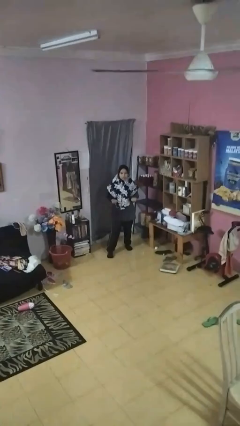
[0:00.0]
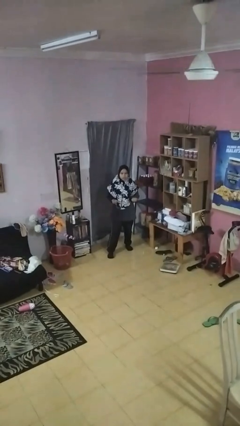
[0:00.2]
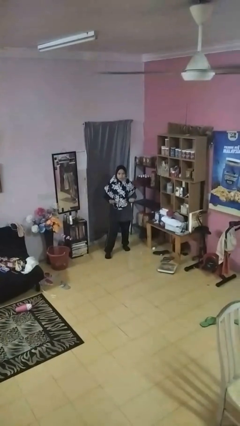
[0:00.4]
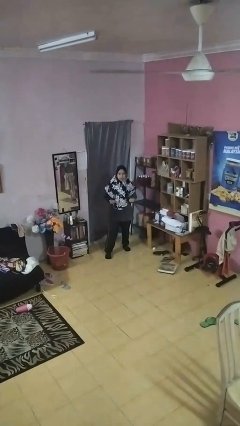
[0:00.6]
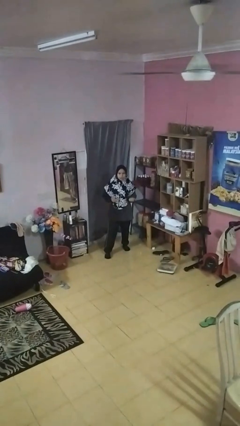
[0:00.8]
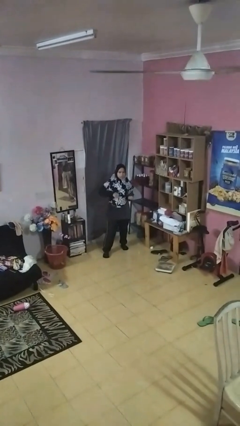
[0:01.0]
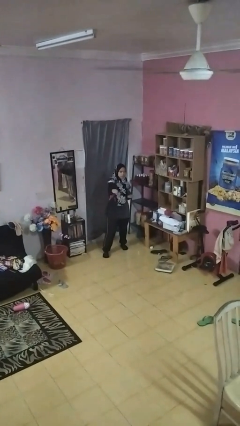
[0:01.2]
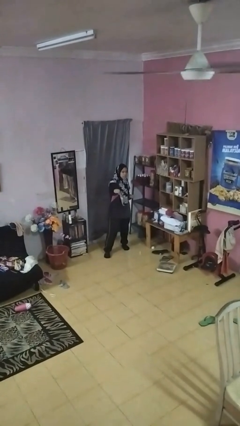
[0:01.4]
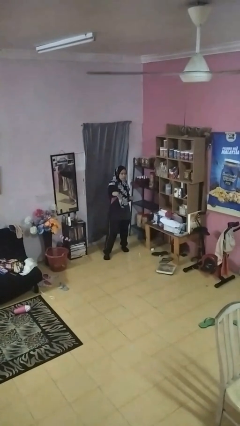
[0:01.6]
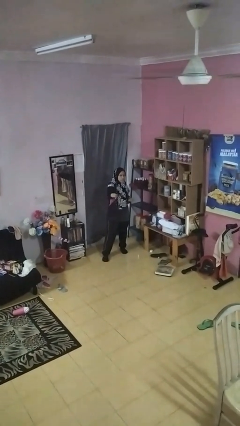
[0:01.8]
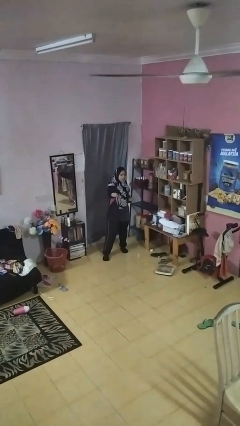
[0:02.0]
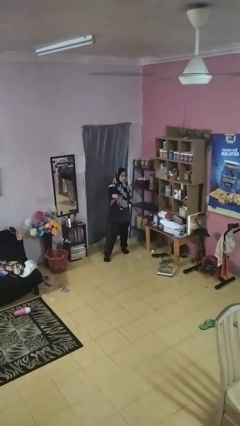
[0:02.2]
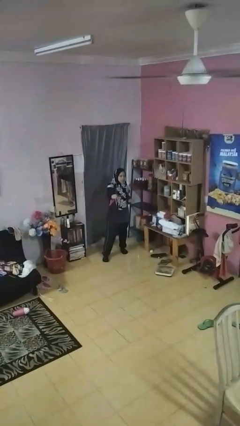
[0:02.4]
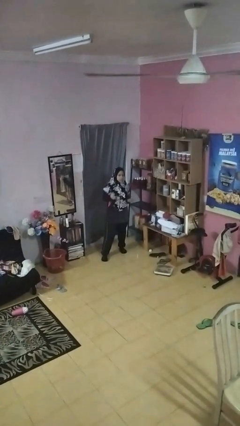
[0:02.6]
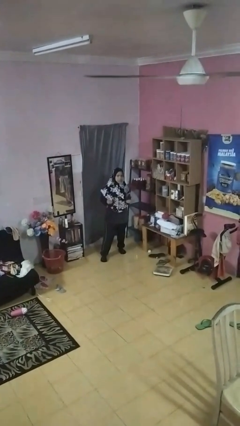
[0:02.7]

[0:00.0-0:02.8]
person punches

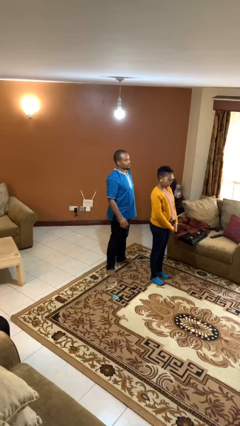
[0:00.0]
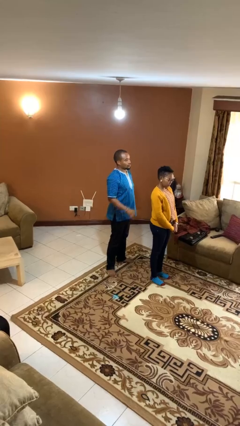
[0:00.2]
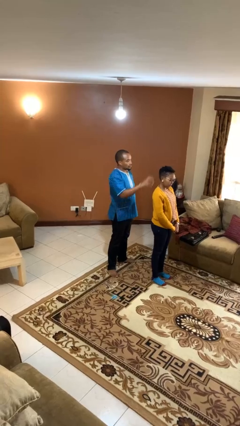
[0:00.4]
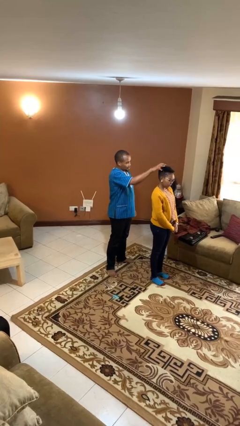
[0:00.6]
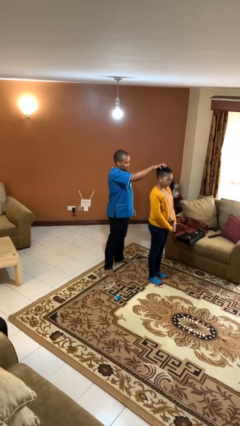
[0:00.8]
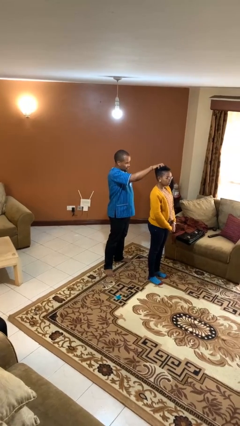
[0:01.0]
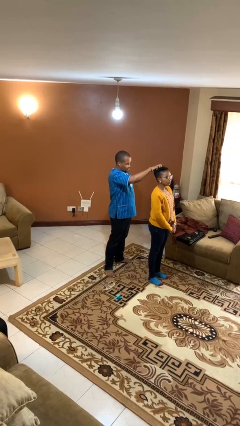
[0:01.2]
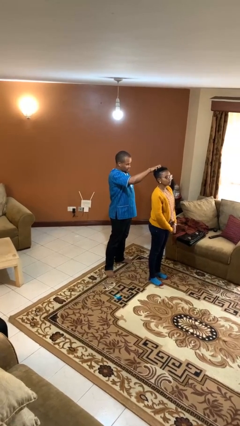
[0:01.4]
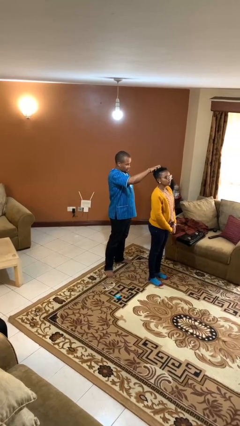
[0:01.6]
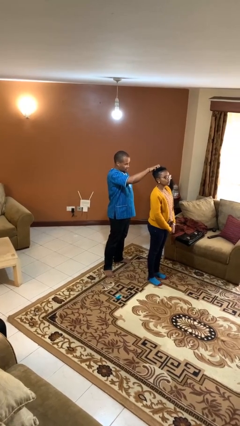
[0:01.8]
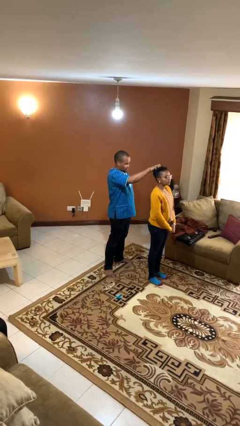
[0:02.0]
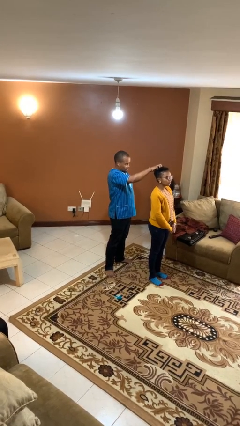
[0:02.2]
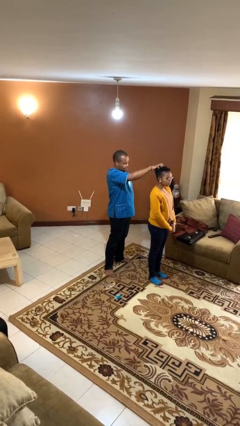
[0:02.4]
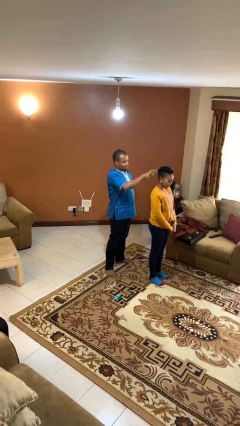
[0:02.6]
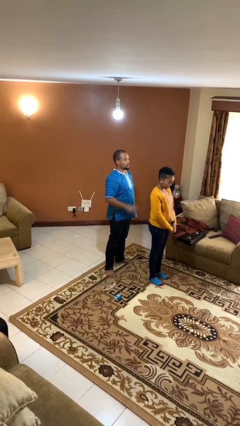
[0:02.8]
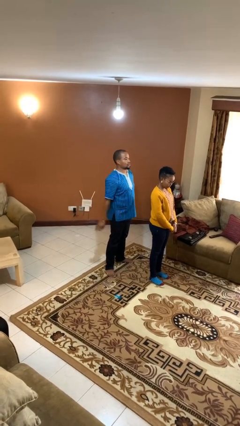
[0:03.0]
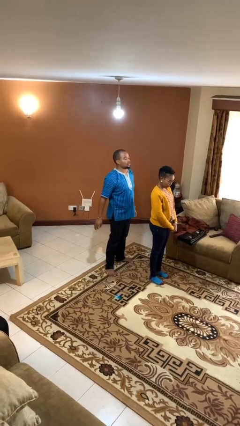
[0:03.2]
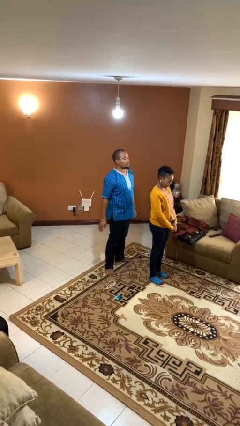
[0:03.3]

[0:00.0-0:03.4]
person grabs person by hair

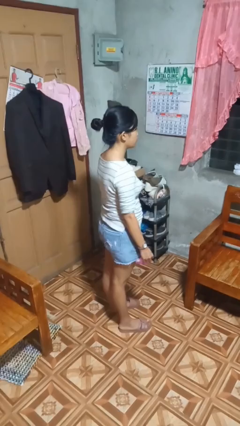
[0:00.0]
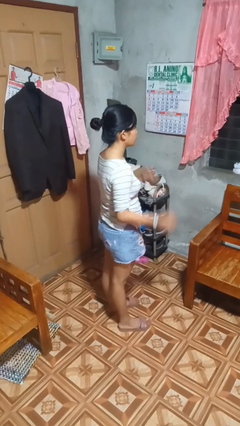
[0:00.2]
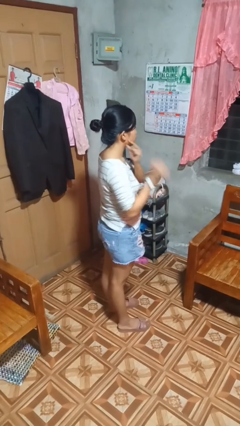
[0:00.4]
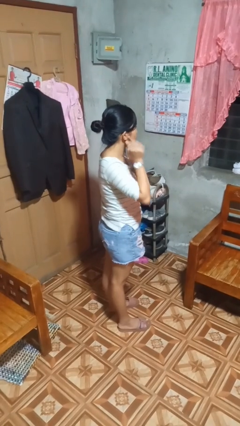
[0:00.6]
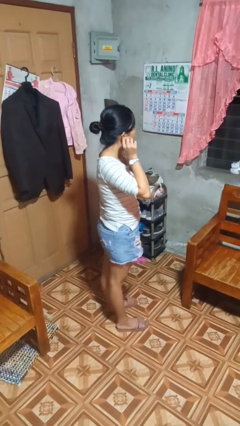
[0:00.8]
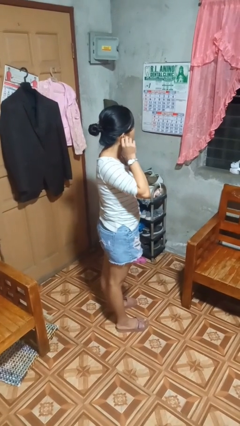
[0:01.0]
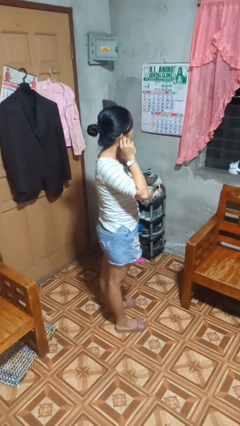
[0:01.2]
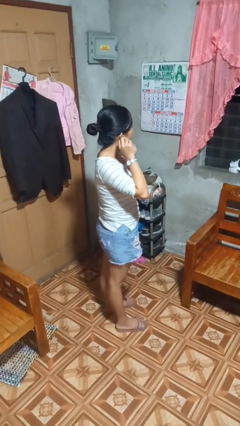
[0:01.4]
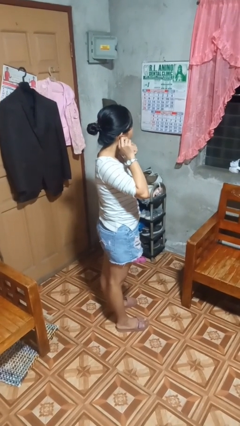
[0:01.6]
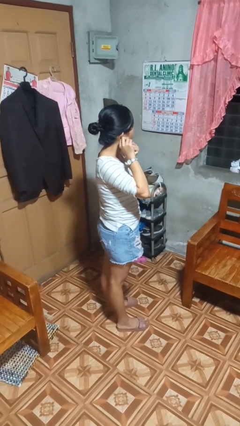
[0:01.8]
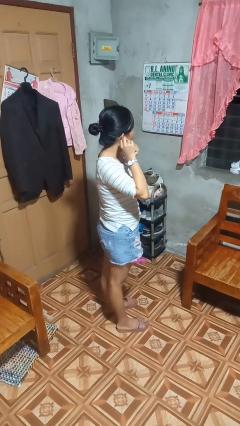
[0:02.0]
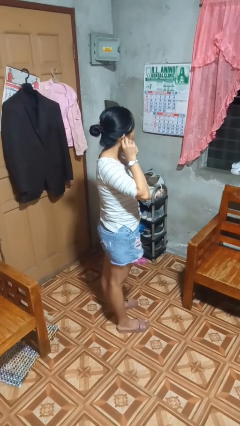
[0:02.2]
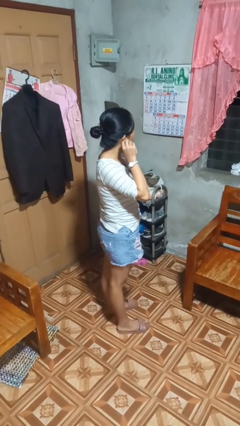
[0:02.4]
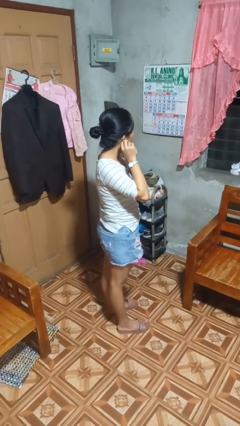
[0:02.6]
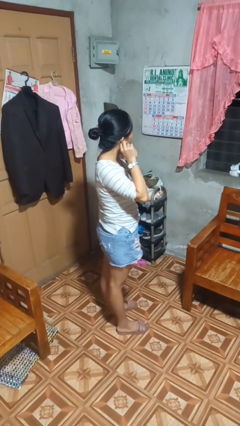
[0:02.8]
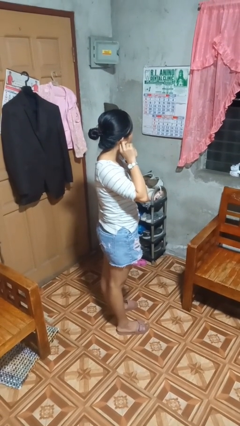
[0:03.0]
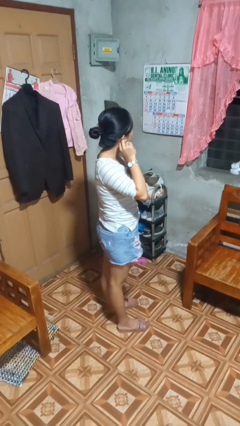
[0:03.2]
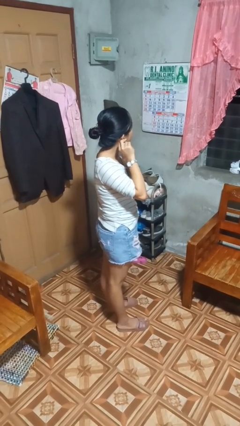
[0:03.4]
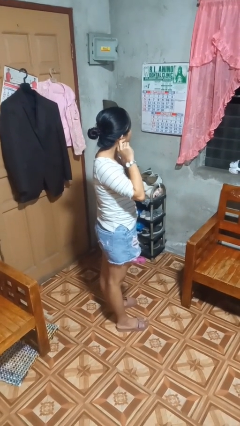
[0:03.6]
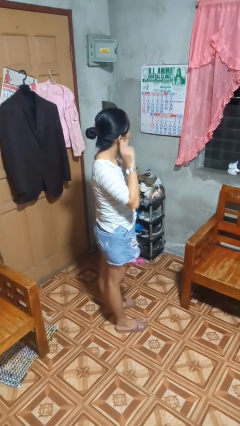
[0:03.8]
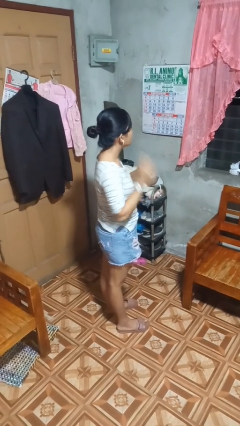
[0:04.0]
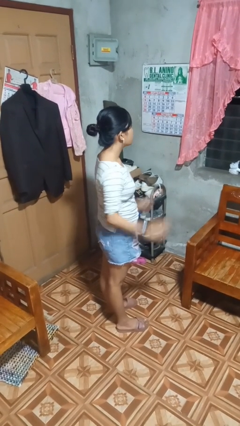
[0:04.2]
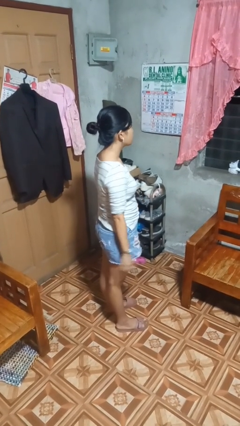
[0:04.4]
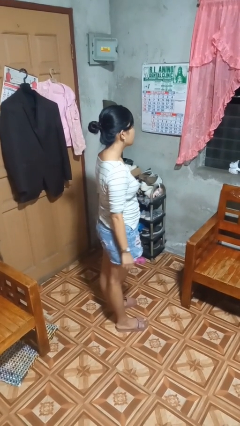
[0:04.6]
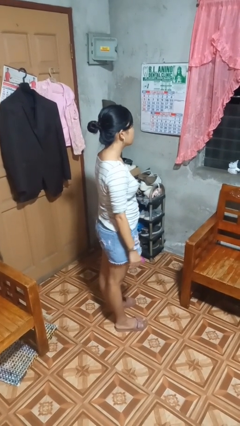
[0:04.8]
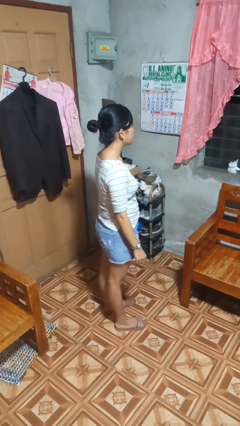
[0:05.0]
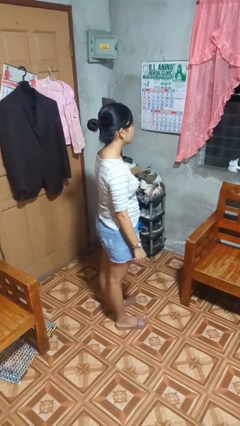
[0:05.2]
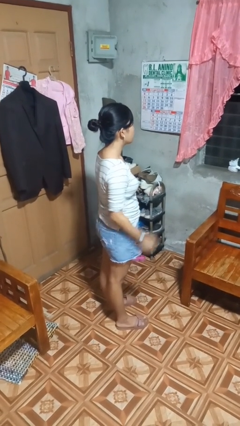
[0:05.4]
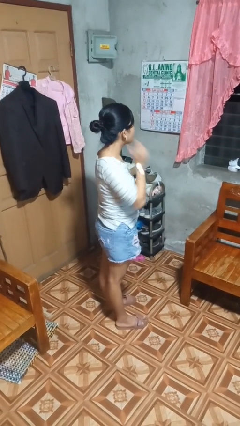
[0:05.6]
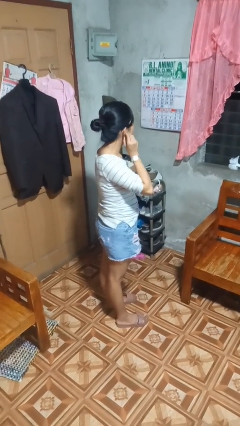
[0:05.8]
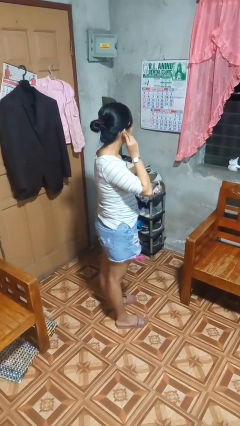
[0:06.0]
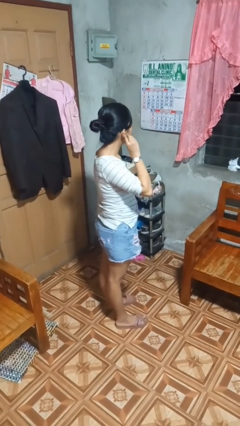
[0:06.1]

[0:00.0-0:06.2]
person puts on earrings

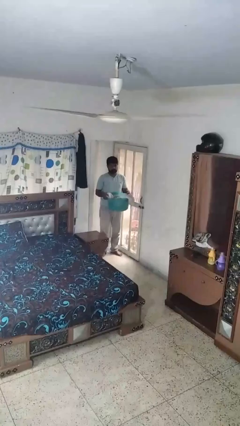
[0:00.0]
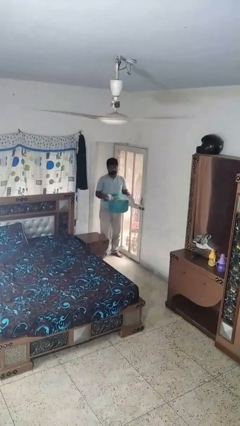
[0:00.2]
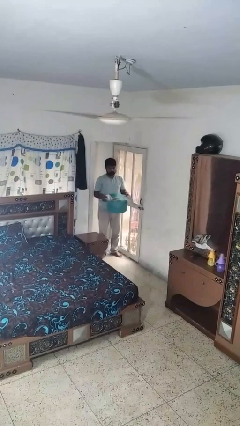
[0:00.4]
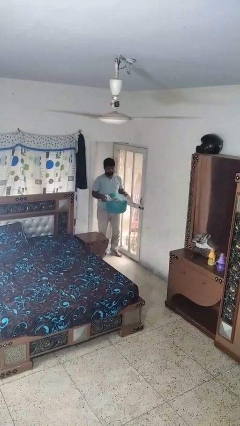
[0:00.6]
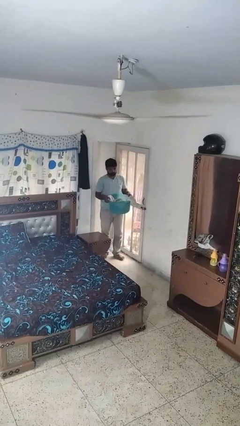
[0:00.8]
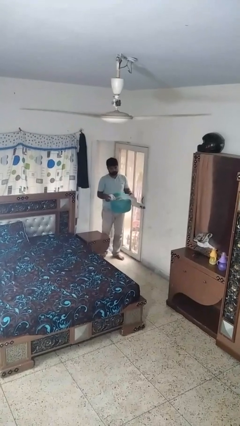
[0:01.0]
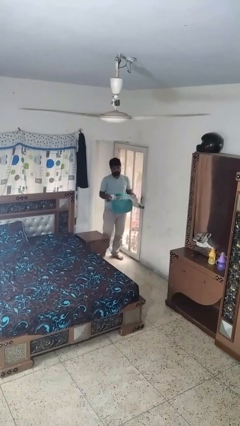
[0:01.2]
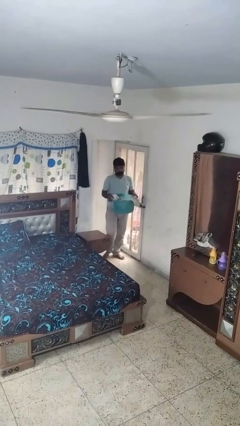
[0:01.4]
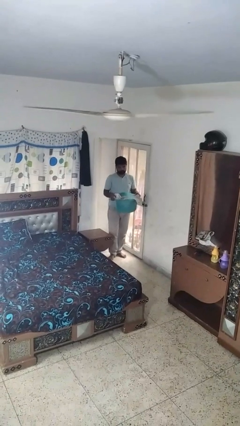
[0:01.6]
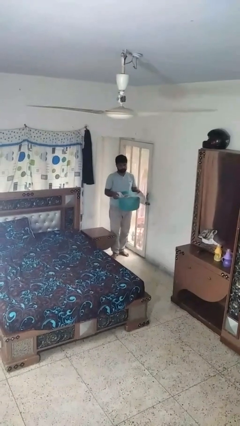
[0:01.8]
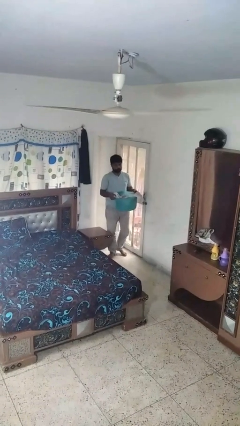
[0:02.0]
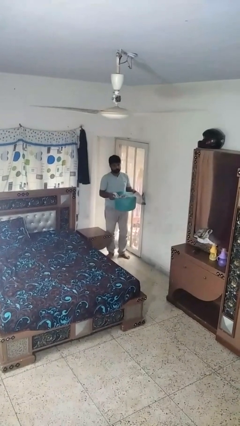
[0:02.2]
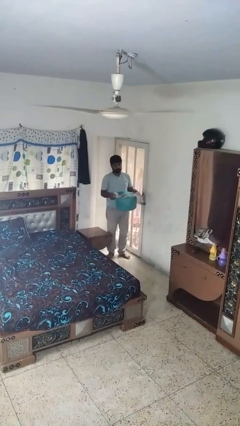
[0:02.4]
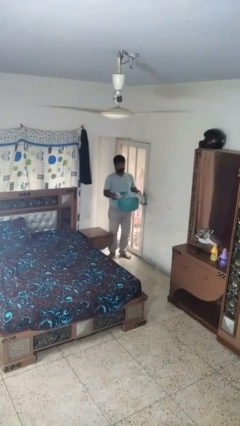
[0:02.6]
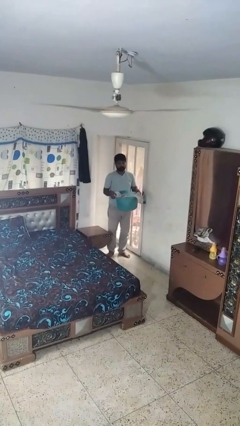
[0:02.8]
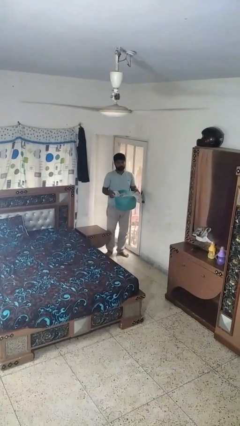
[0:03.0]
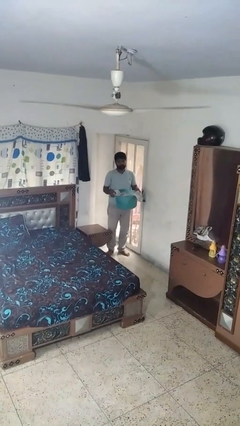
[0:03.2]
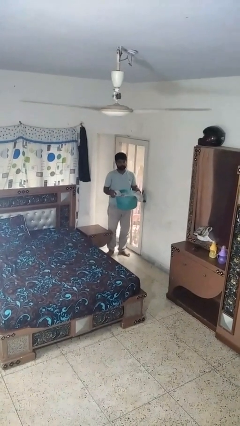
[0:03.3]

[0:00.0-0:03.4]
person carries laundry basket

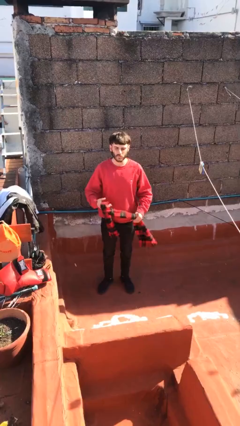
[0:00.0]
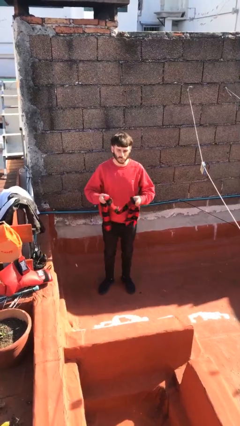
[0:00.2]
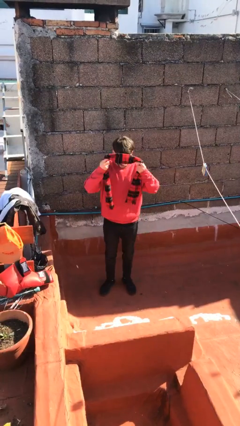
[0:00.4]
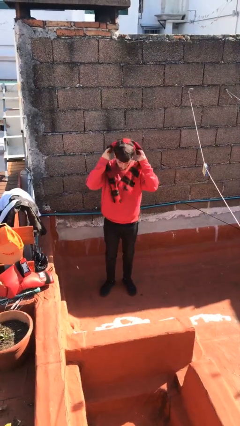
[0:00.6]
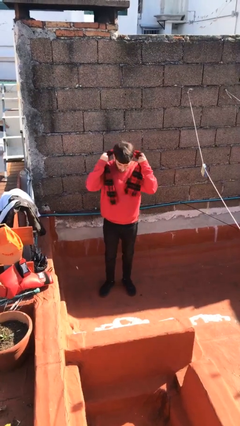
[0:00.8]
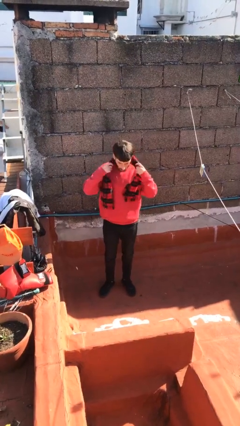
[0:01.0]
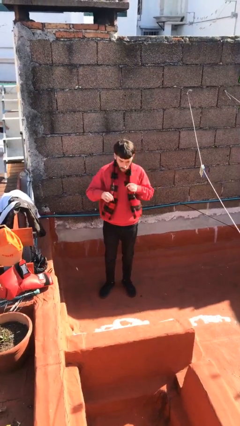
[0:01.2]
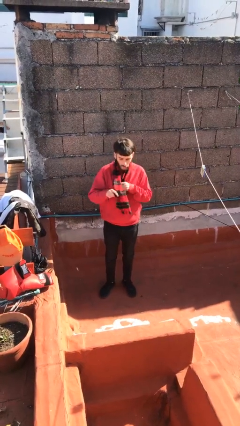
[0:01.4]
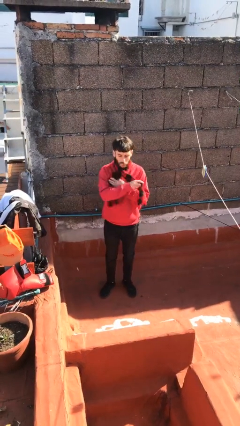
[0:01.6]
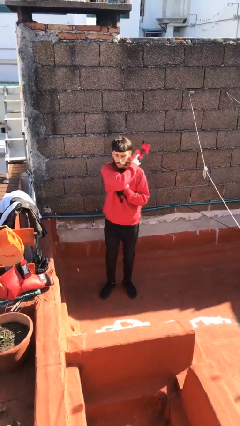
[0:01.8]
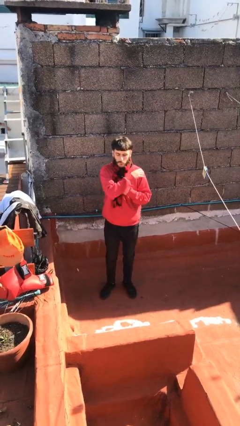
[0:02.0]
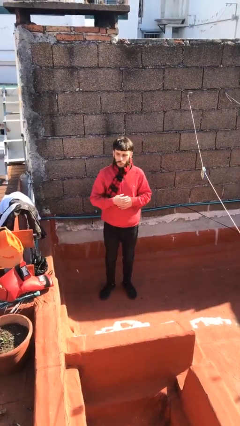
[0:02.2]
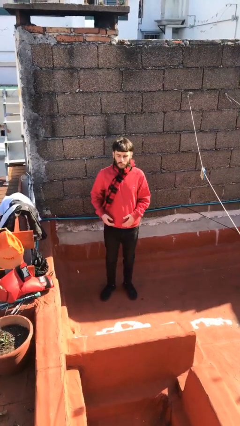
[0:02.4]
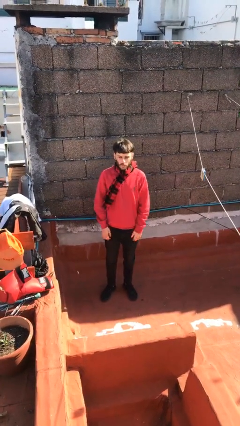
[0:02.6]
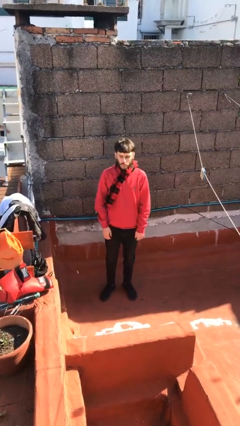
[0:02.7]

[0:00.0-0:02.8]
person puts on scarf
